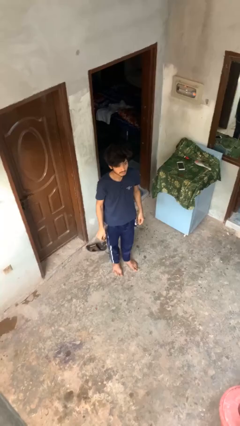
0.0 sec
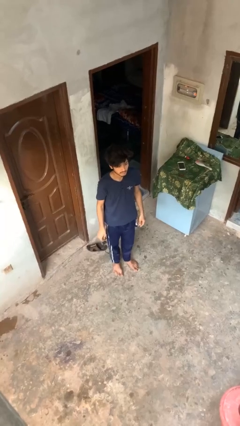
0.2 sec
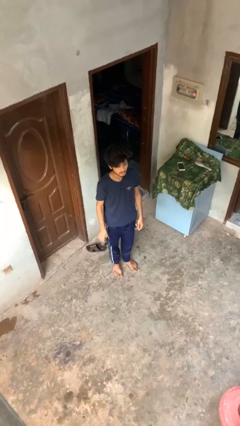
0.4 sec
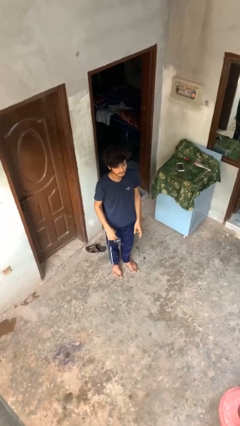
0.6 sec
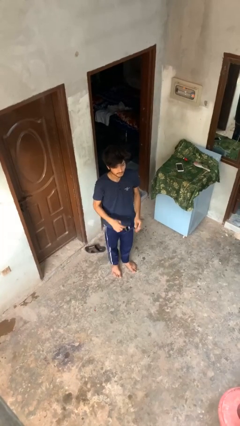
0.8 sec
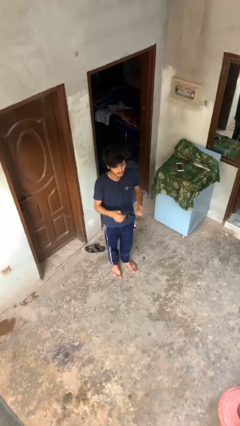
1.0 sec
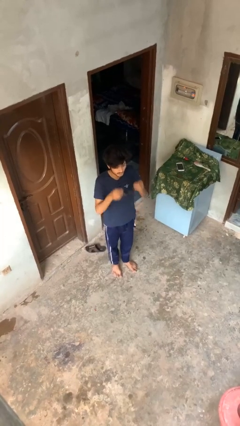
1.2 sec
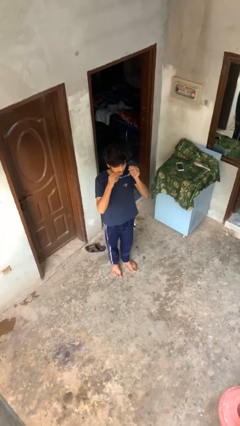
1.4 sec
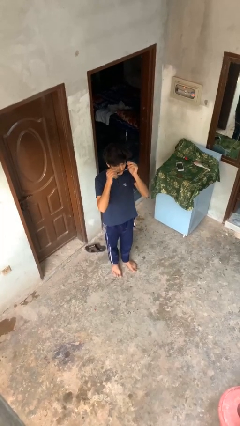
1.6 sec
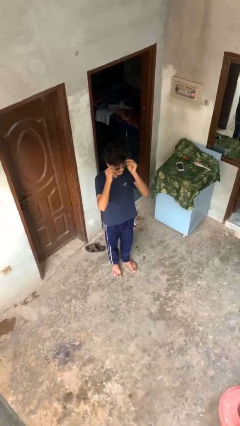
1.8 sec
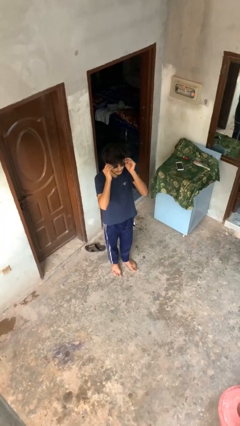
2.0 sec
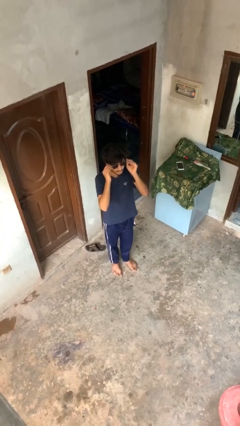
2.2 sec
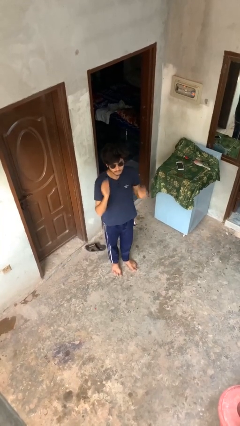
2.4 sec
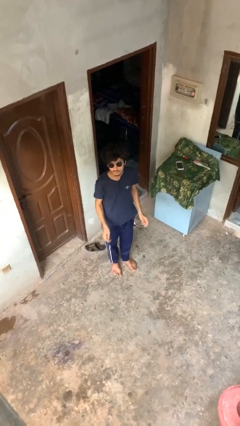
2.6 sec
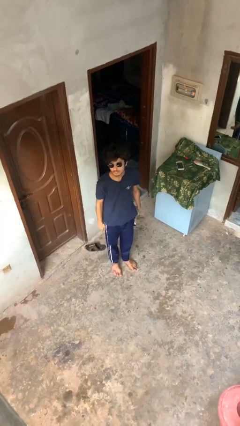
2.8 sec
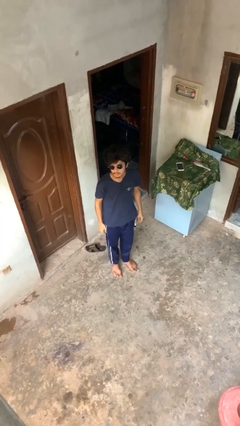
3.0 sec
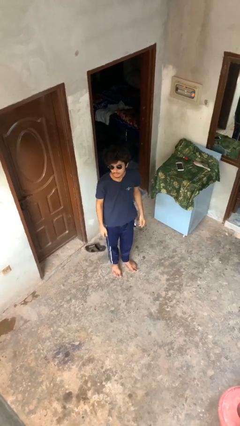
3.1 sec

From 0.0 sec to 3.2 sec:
person puts on sunglasses

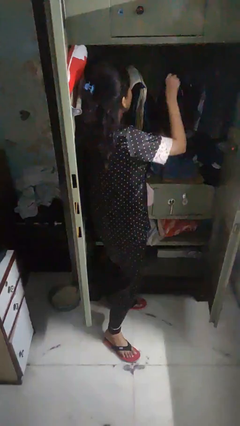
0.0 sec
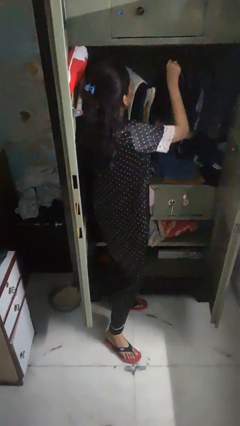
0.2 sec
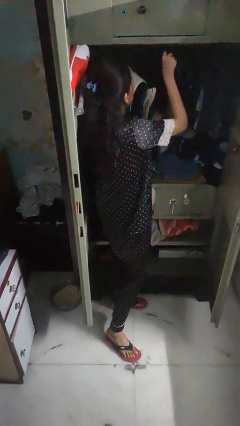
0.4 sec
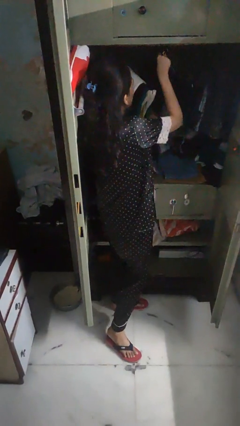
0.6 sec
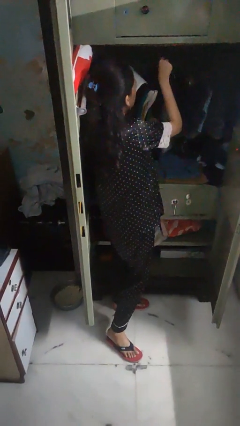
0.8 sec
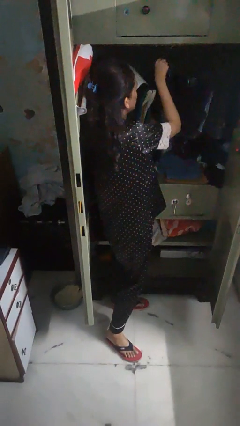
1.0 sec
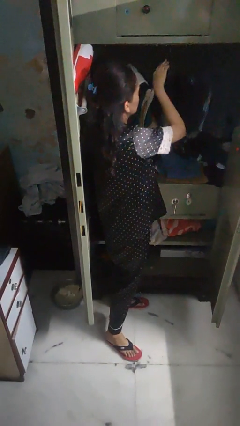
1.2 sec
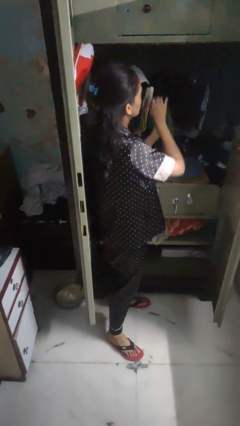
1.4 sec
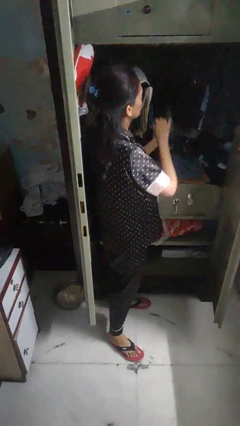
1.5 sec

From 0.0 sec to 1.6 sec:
person puts clothes into closet

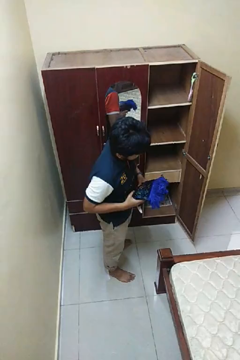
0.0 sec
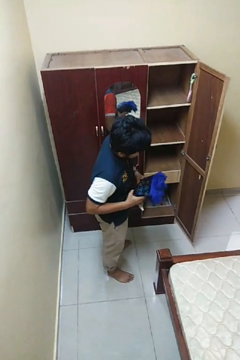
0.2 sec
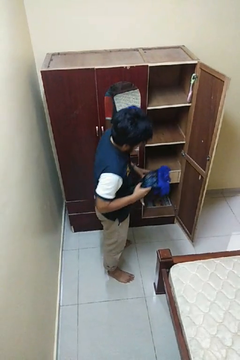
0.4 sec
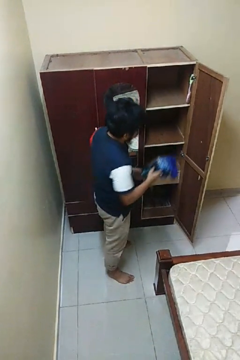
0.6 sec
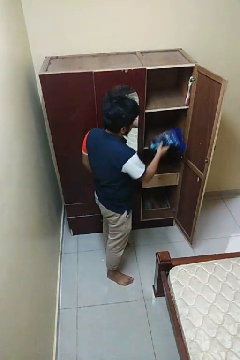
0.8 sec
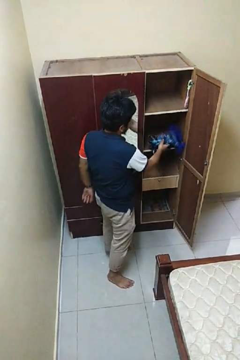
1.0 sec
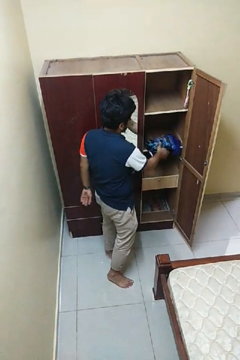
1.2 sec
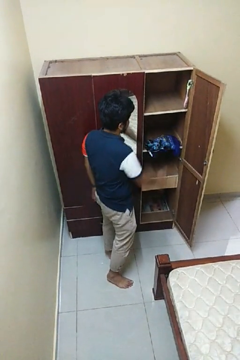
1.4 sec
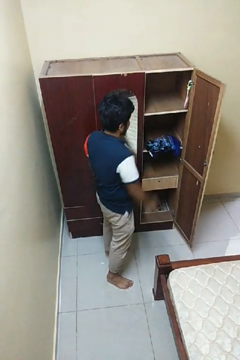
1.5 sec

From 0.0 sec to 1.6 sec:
person puts down object into cabinet

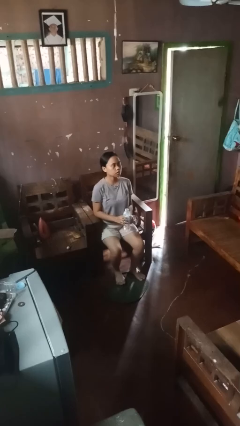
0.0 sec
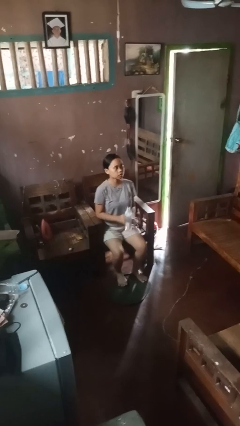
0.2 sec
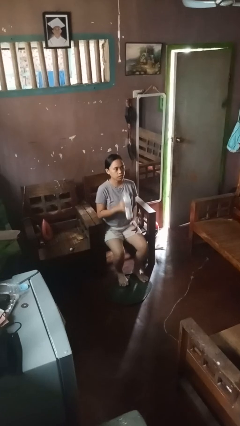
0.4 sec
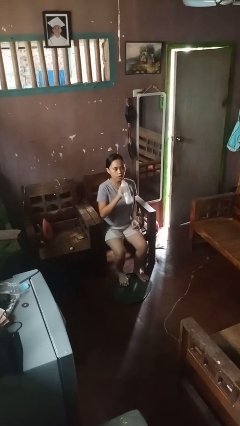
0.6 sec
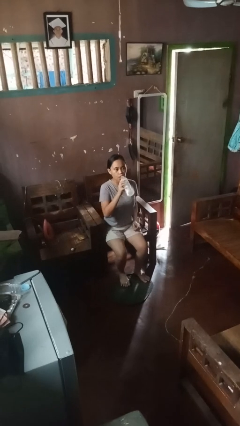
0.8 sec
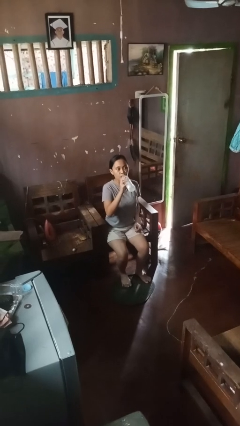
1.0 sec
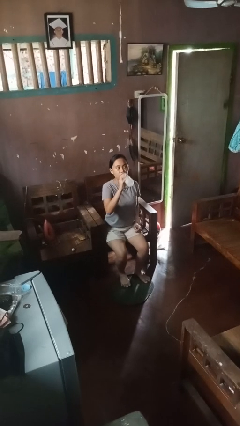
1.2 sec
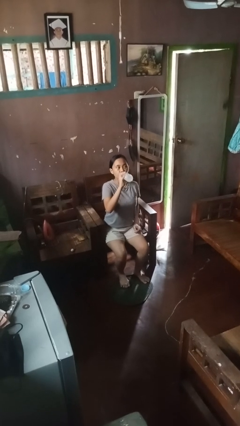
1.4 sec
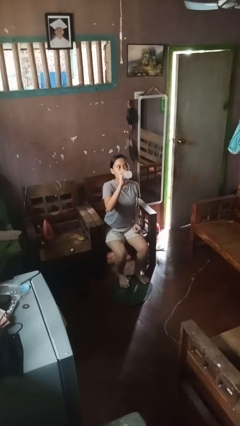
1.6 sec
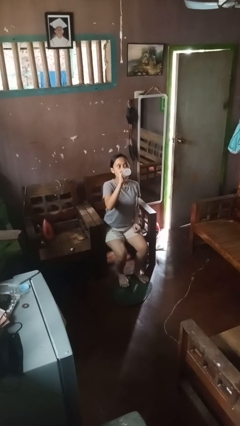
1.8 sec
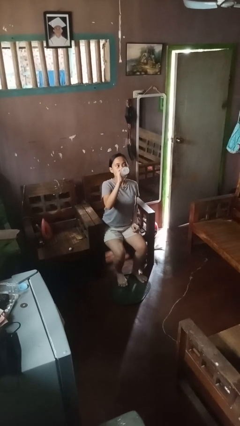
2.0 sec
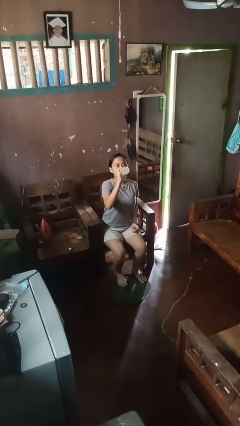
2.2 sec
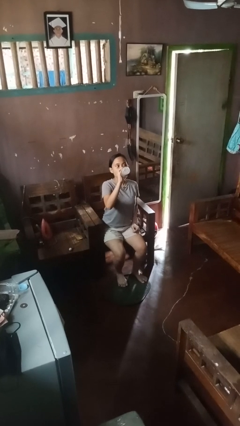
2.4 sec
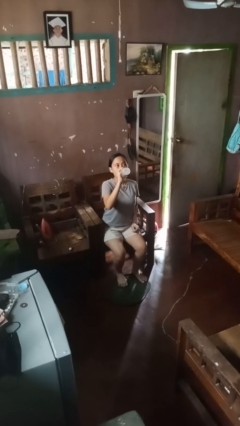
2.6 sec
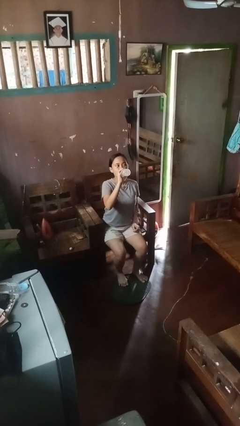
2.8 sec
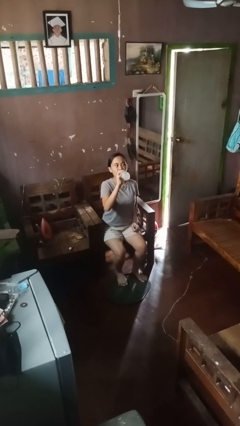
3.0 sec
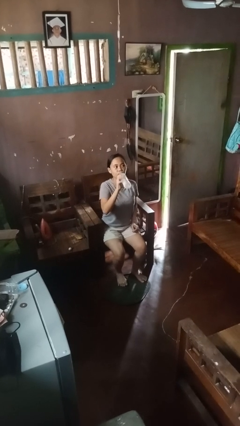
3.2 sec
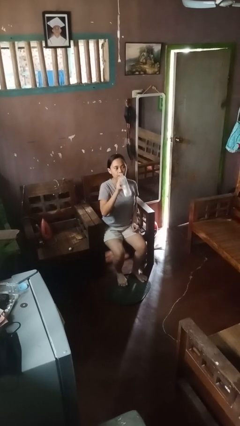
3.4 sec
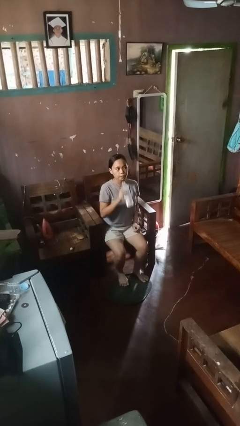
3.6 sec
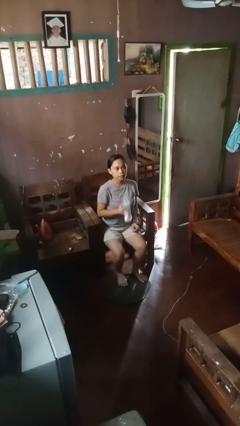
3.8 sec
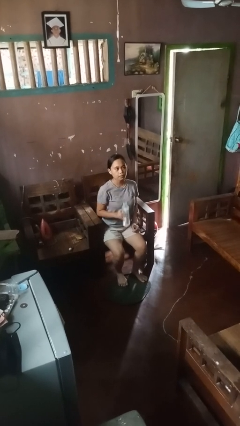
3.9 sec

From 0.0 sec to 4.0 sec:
person drinks from bottle

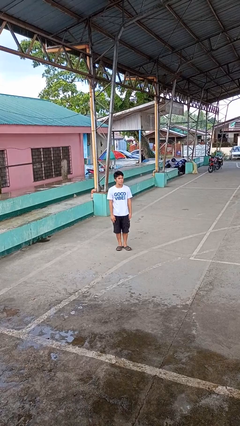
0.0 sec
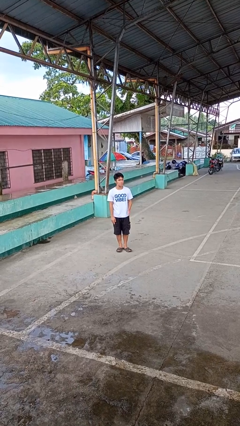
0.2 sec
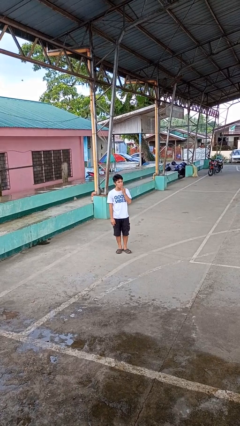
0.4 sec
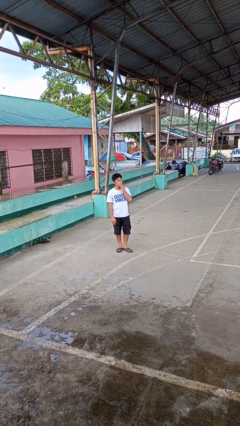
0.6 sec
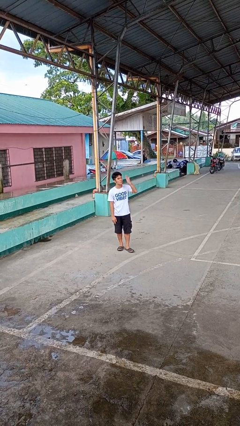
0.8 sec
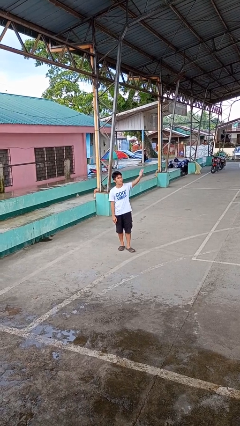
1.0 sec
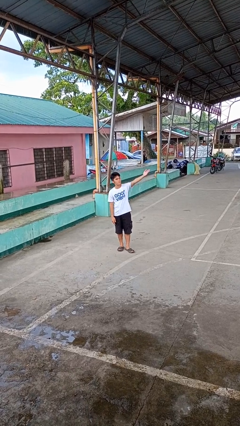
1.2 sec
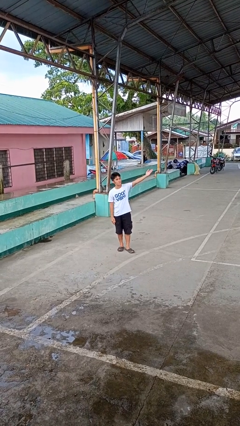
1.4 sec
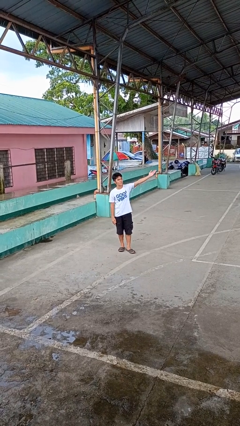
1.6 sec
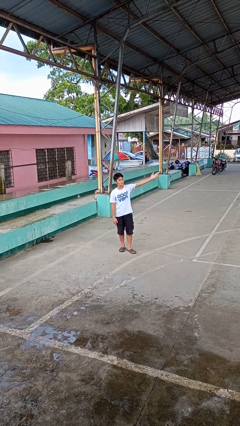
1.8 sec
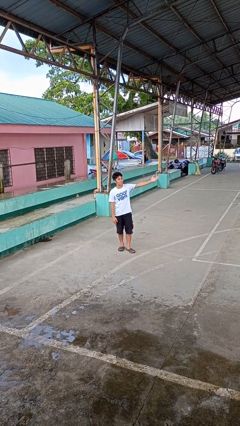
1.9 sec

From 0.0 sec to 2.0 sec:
person gestures blow kiss

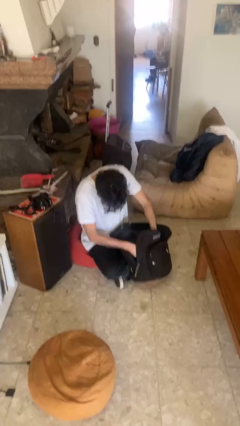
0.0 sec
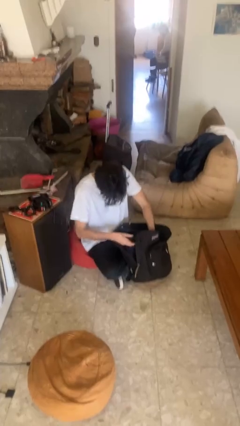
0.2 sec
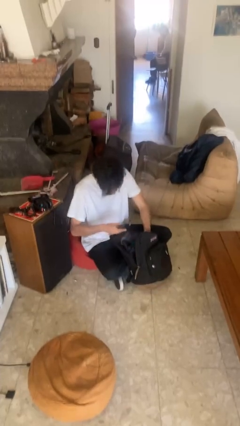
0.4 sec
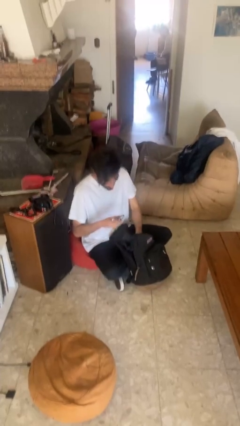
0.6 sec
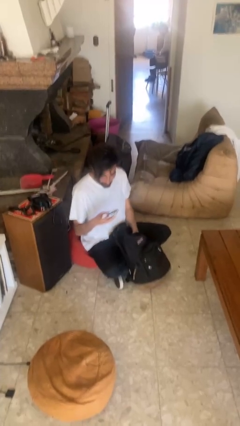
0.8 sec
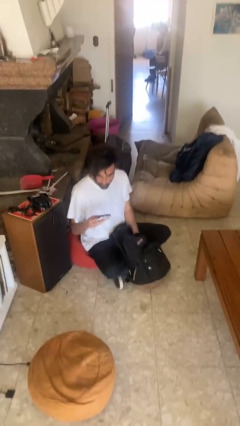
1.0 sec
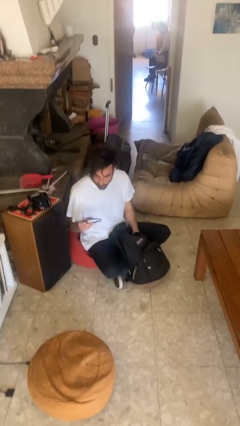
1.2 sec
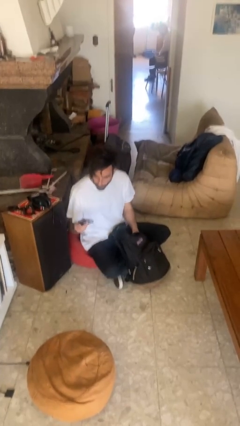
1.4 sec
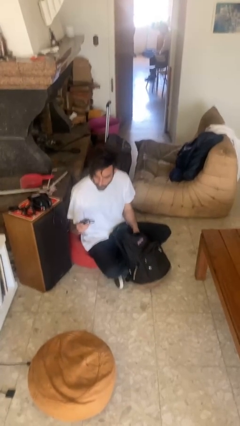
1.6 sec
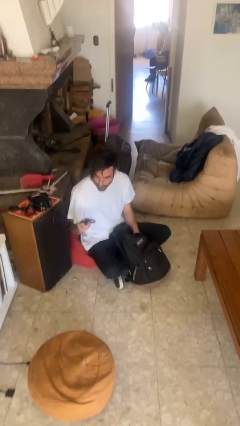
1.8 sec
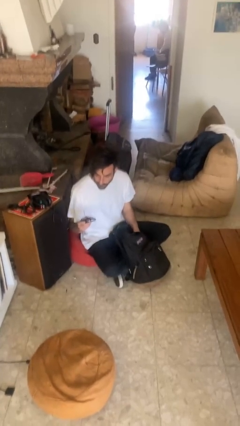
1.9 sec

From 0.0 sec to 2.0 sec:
person takes object from backpack

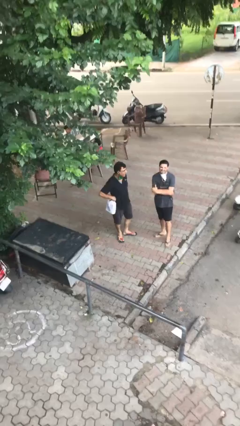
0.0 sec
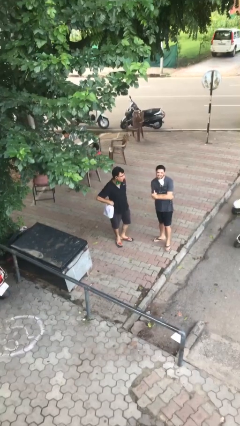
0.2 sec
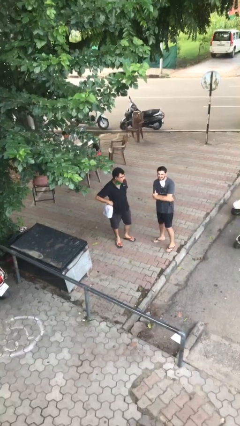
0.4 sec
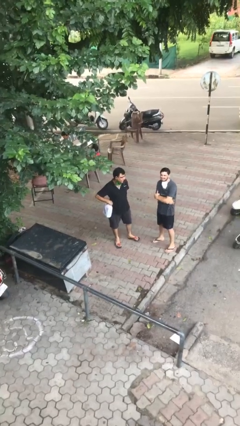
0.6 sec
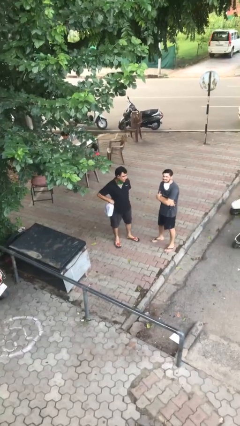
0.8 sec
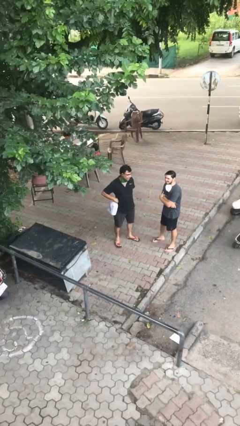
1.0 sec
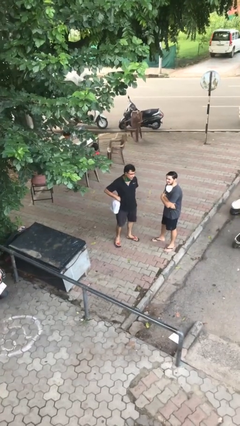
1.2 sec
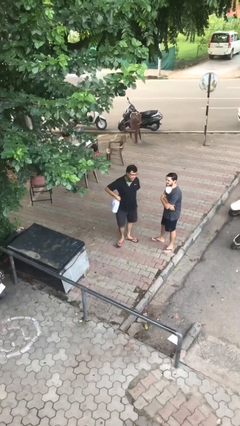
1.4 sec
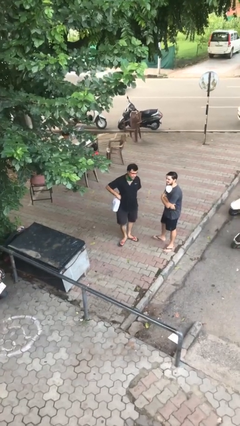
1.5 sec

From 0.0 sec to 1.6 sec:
person laughs with person

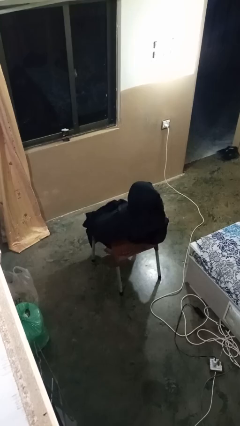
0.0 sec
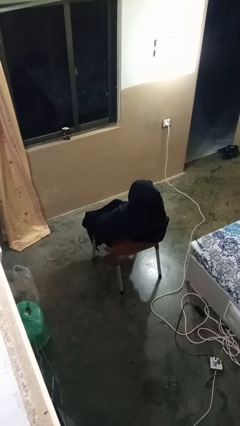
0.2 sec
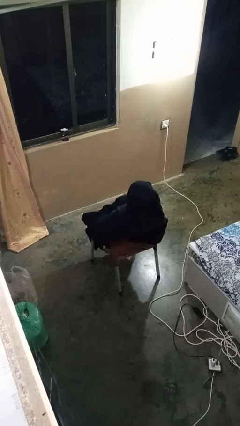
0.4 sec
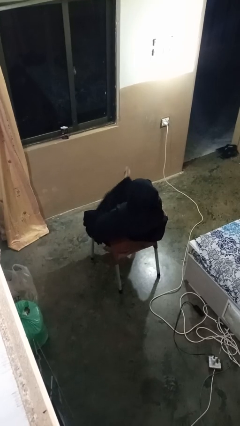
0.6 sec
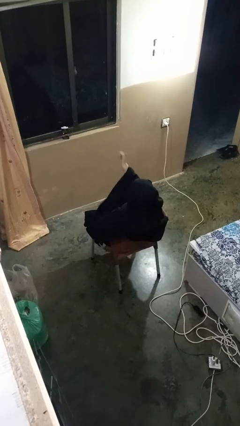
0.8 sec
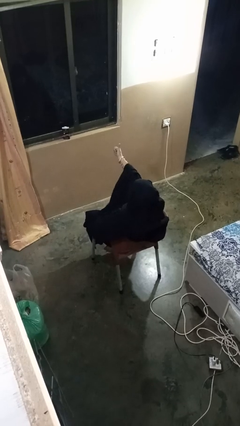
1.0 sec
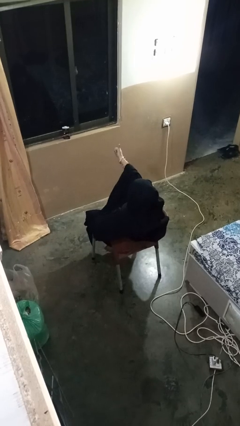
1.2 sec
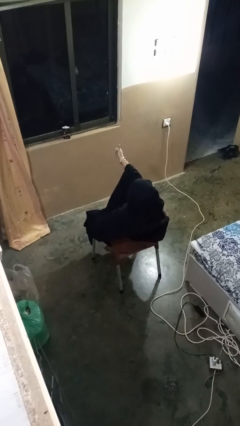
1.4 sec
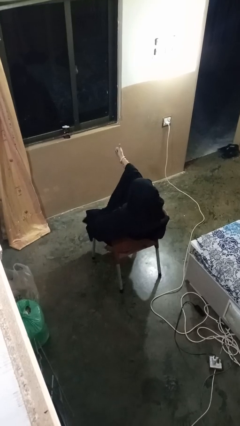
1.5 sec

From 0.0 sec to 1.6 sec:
person gestures thumbs up
